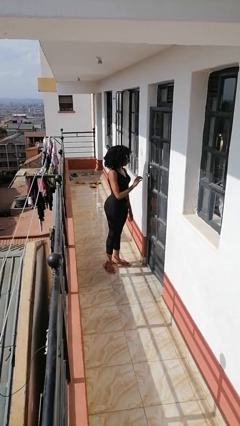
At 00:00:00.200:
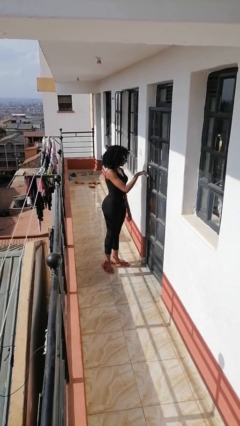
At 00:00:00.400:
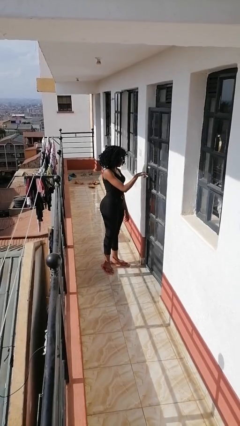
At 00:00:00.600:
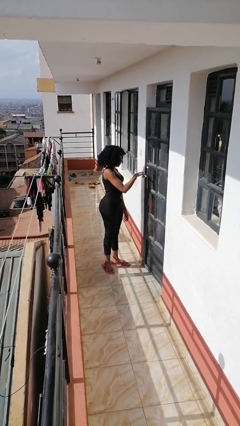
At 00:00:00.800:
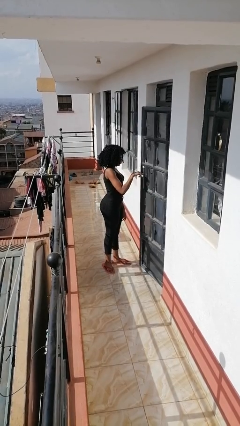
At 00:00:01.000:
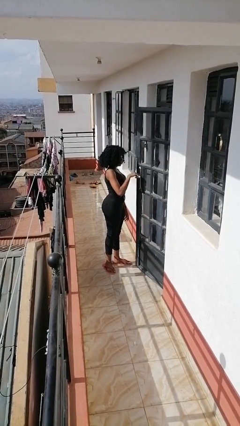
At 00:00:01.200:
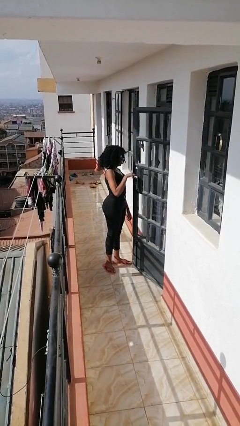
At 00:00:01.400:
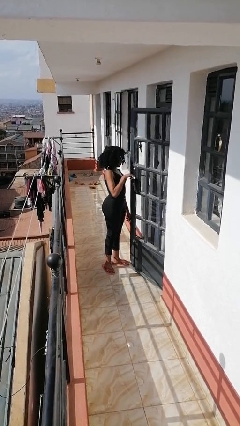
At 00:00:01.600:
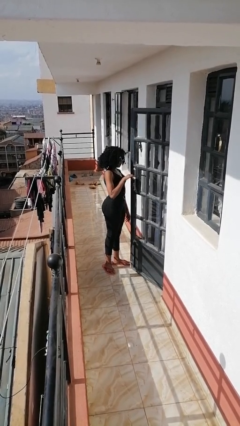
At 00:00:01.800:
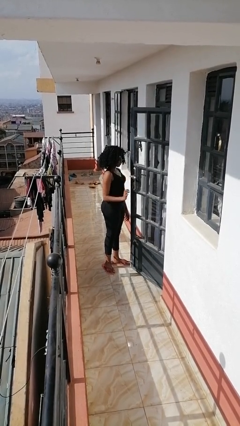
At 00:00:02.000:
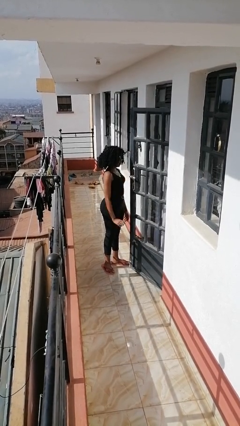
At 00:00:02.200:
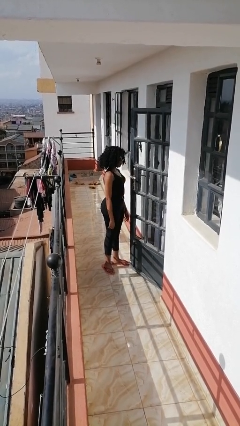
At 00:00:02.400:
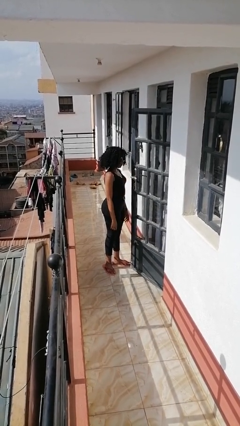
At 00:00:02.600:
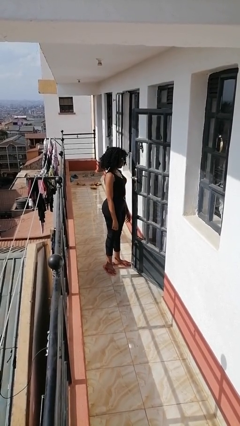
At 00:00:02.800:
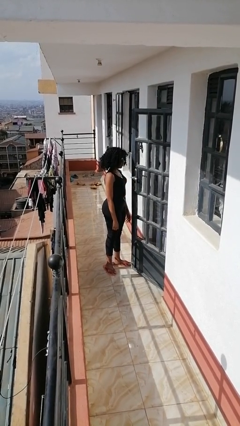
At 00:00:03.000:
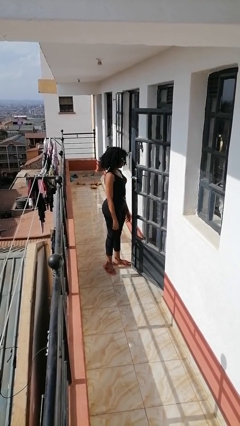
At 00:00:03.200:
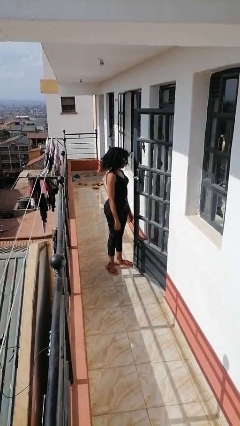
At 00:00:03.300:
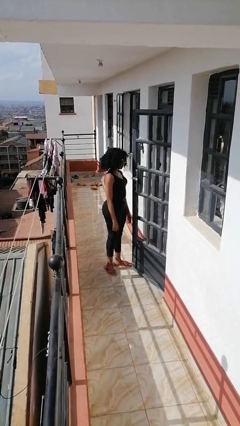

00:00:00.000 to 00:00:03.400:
person opens facility door

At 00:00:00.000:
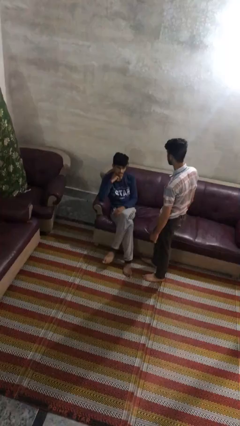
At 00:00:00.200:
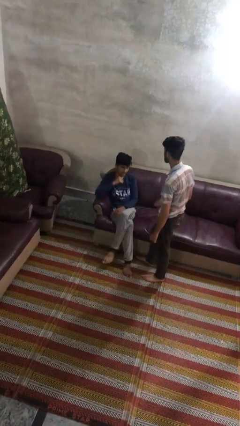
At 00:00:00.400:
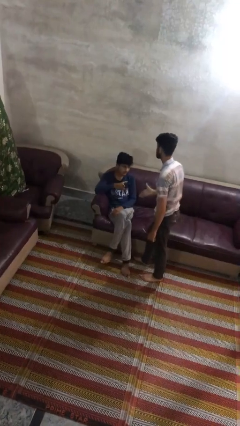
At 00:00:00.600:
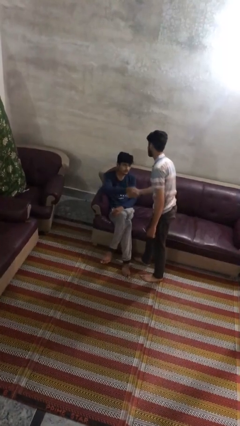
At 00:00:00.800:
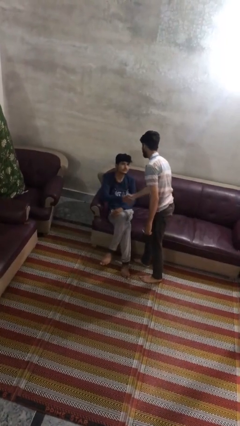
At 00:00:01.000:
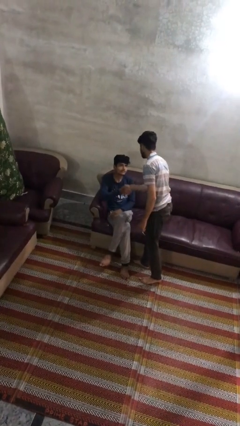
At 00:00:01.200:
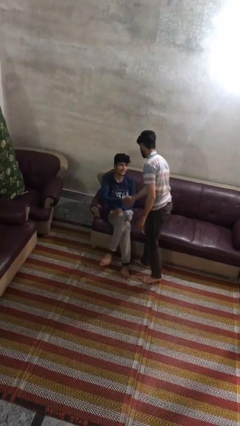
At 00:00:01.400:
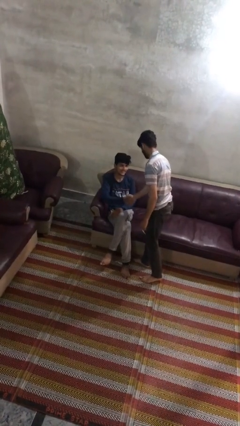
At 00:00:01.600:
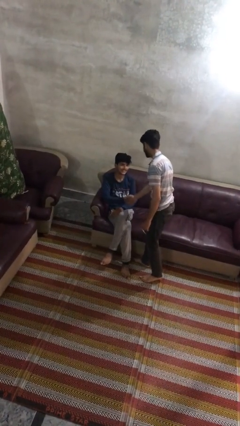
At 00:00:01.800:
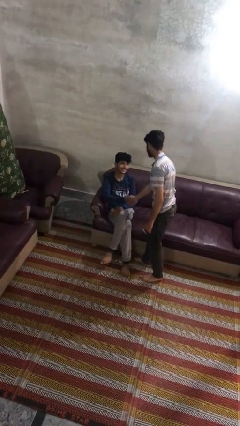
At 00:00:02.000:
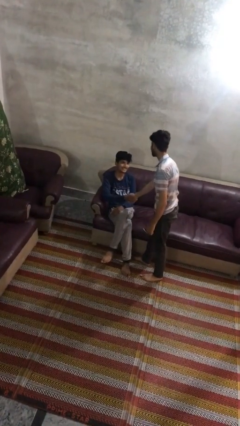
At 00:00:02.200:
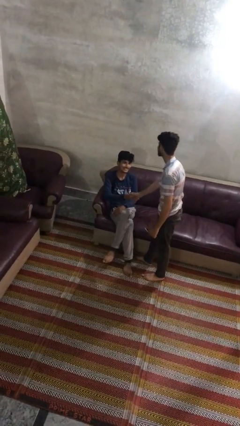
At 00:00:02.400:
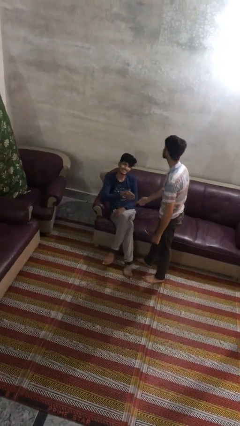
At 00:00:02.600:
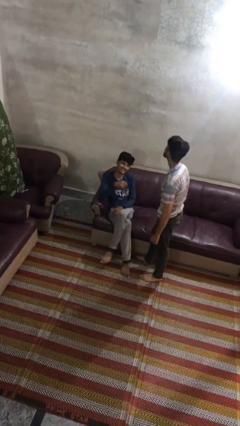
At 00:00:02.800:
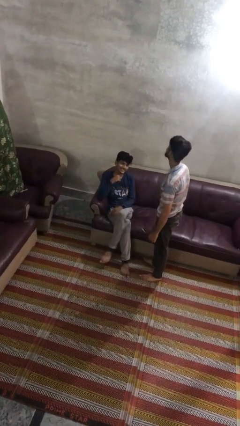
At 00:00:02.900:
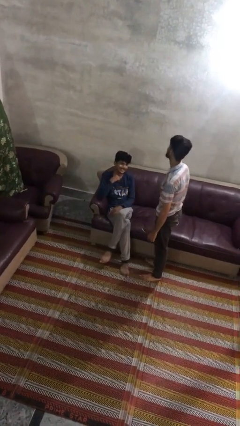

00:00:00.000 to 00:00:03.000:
person shakes hand

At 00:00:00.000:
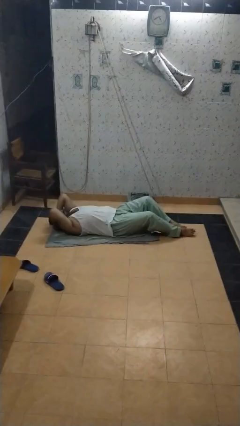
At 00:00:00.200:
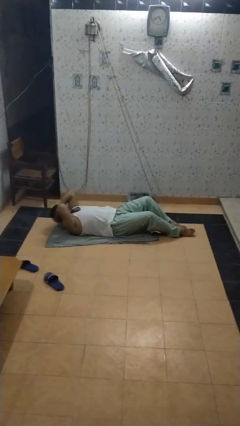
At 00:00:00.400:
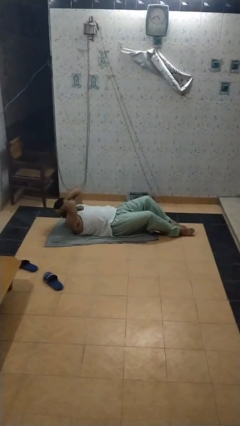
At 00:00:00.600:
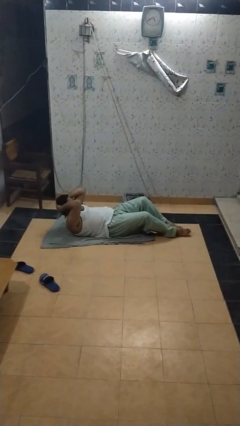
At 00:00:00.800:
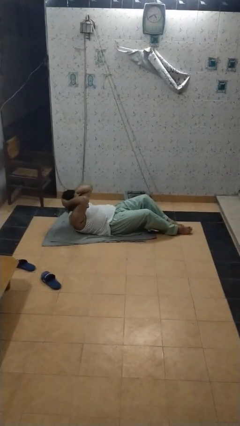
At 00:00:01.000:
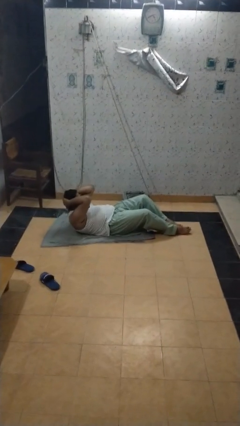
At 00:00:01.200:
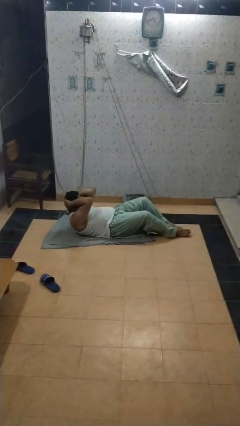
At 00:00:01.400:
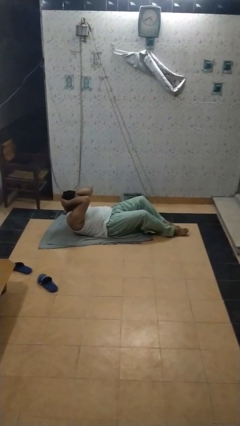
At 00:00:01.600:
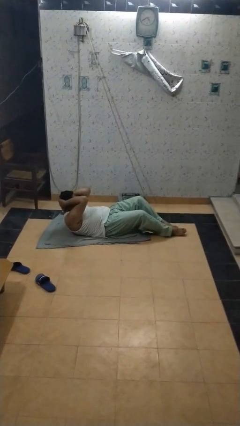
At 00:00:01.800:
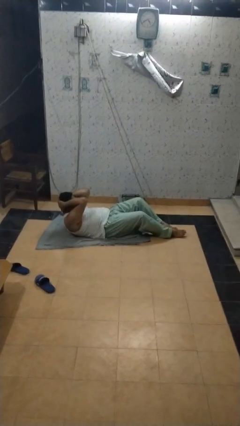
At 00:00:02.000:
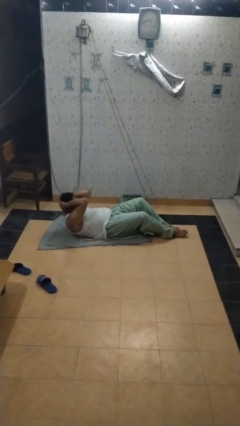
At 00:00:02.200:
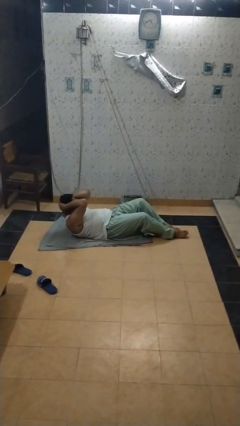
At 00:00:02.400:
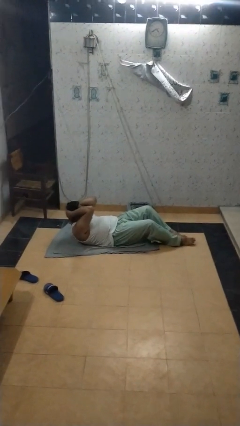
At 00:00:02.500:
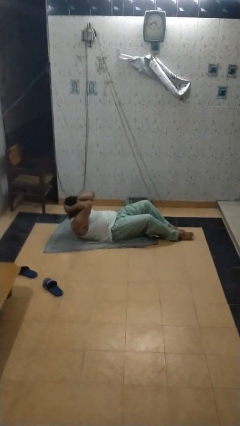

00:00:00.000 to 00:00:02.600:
person exercises with situp

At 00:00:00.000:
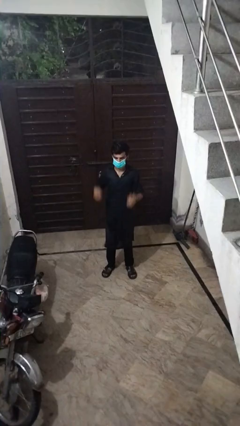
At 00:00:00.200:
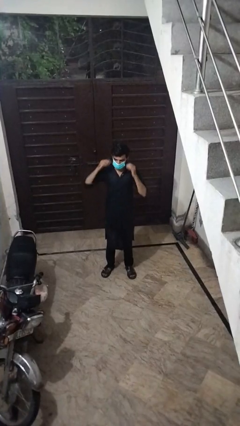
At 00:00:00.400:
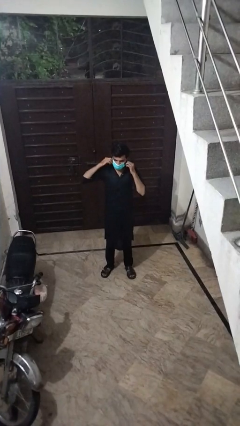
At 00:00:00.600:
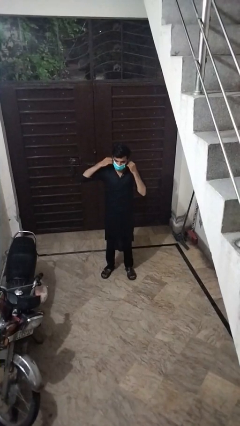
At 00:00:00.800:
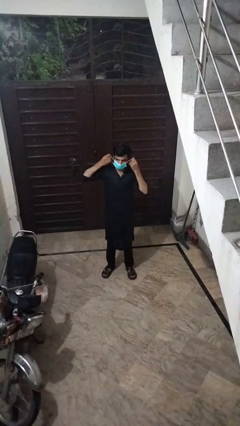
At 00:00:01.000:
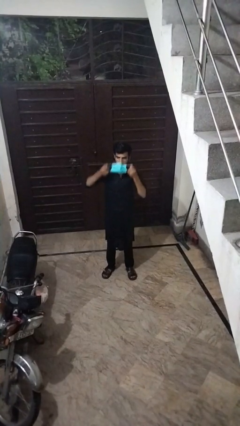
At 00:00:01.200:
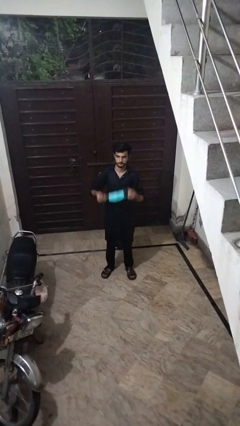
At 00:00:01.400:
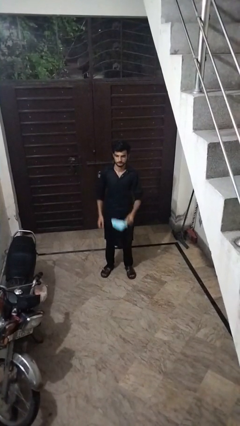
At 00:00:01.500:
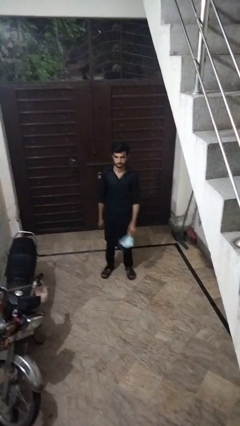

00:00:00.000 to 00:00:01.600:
person takes off facemask

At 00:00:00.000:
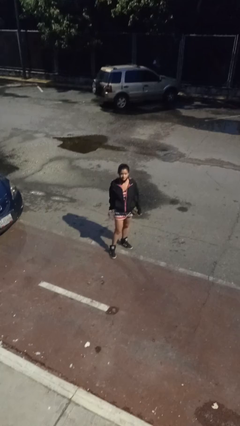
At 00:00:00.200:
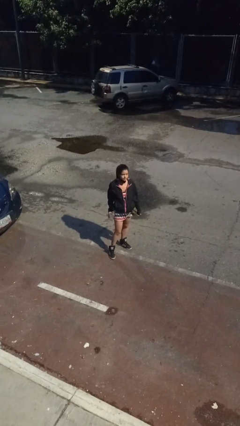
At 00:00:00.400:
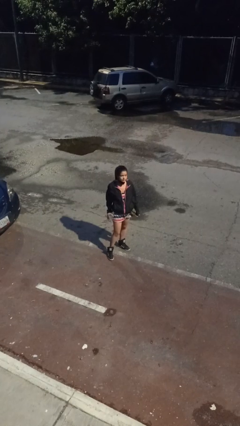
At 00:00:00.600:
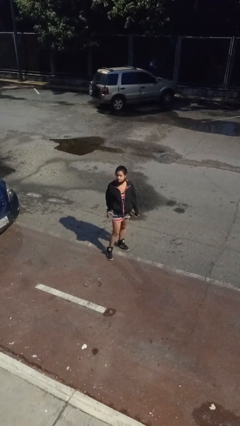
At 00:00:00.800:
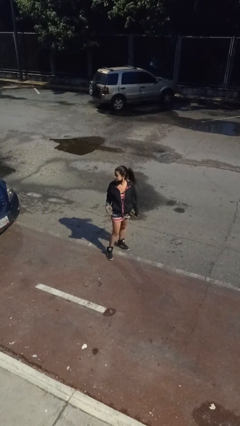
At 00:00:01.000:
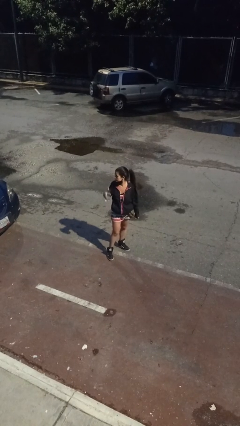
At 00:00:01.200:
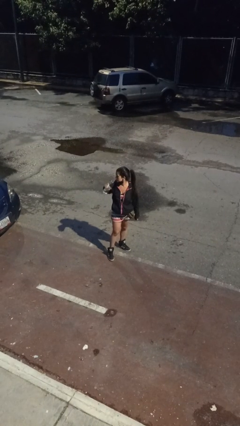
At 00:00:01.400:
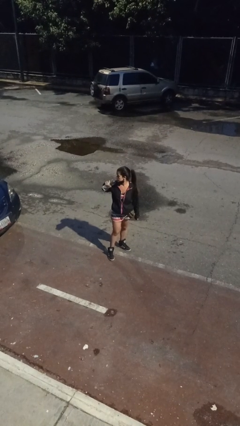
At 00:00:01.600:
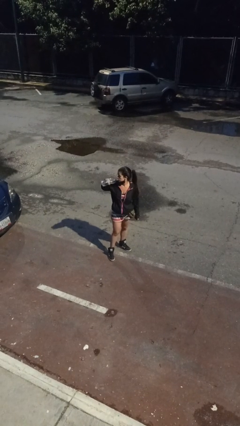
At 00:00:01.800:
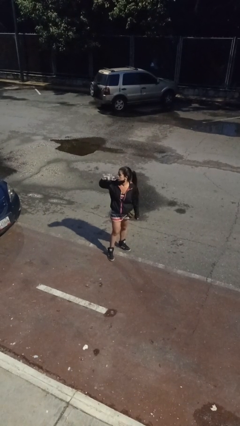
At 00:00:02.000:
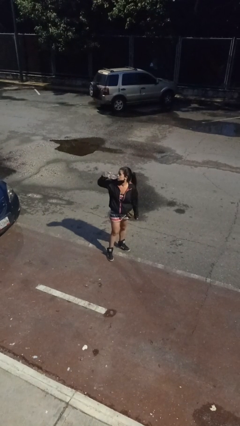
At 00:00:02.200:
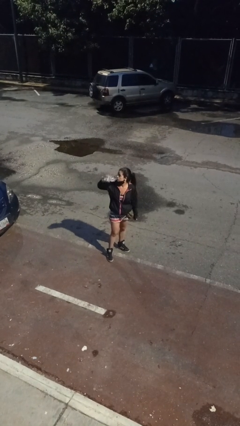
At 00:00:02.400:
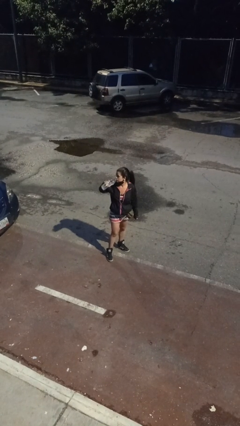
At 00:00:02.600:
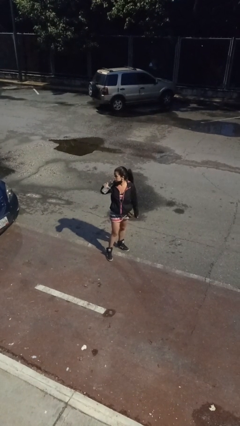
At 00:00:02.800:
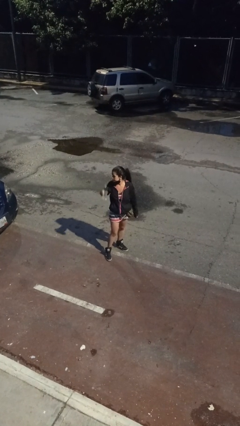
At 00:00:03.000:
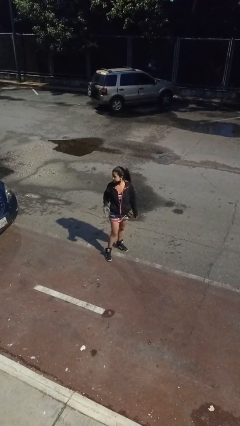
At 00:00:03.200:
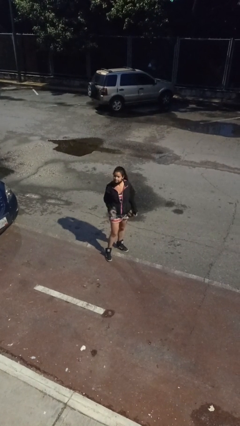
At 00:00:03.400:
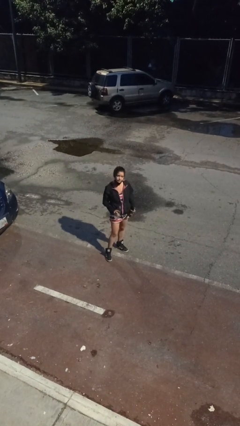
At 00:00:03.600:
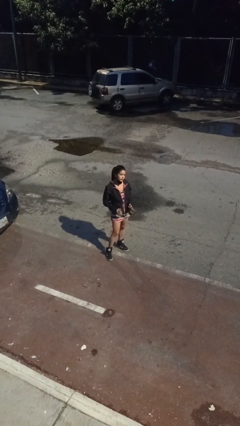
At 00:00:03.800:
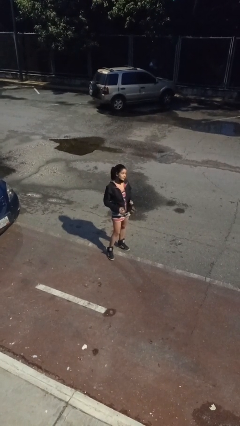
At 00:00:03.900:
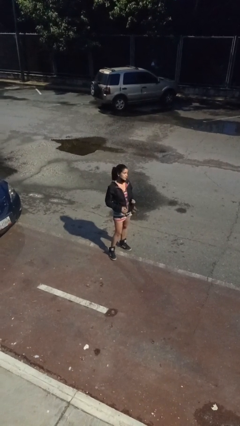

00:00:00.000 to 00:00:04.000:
person drinks from bottle

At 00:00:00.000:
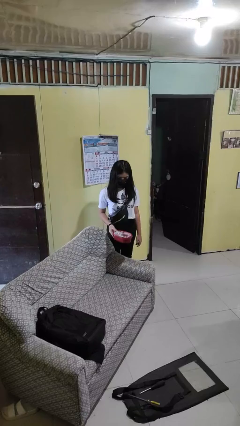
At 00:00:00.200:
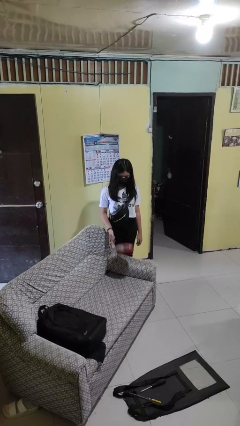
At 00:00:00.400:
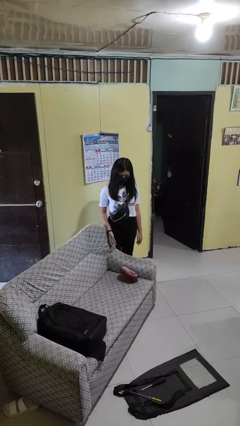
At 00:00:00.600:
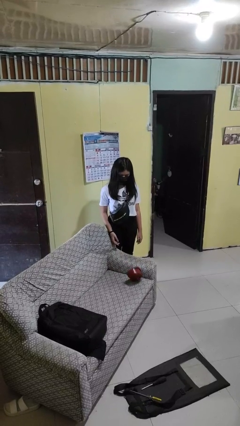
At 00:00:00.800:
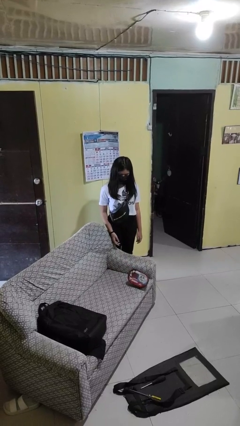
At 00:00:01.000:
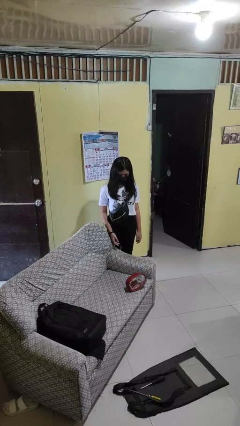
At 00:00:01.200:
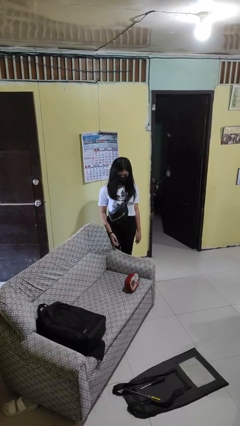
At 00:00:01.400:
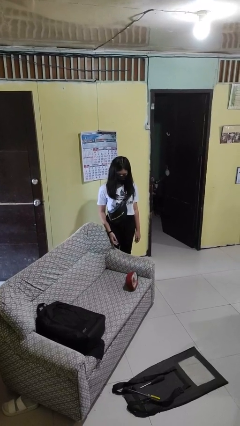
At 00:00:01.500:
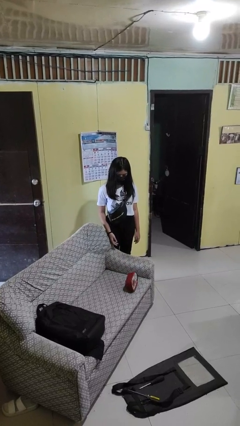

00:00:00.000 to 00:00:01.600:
person puts down object on couch

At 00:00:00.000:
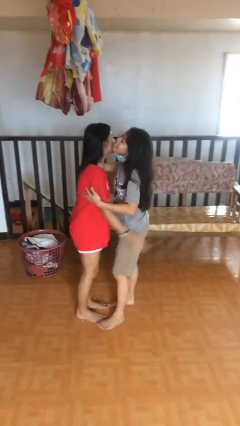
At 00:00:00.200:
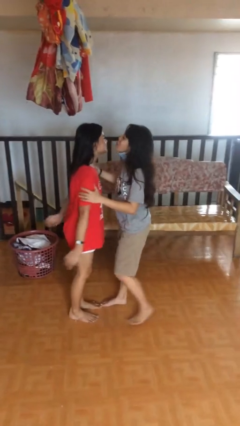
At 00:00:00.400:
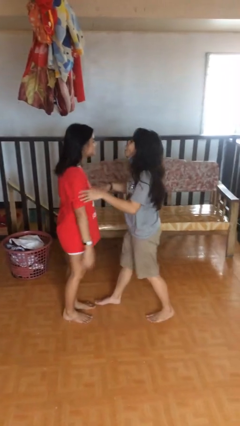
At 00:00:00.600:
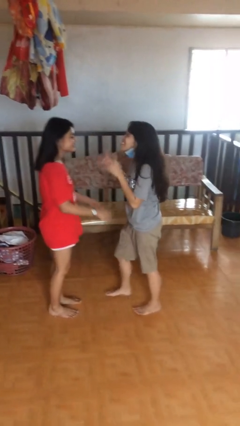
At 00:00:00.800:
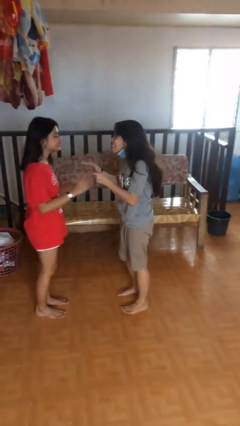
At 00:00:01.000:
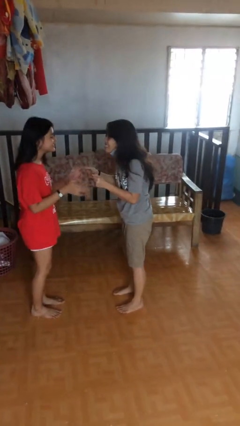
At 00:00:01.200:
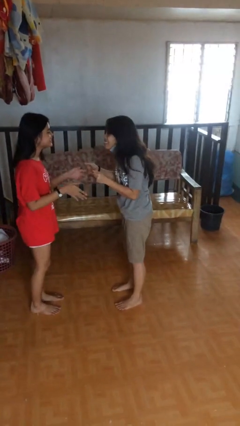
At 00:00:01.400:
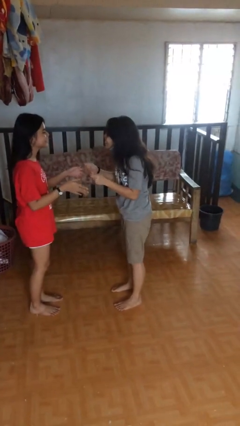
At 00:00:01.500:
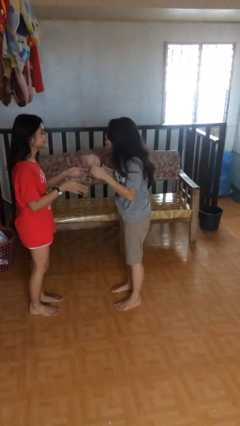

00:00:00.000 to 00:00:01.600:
person talks to person
